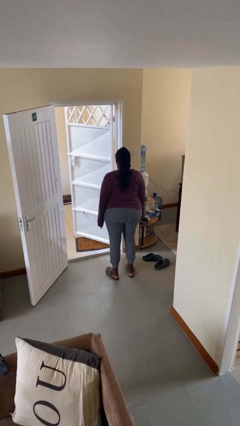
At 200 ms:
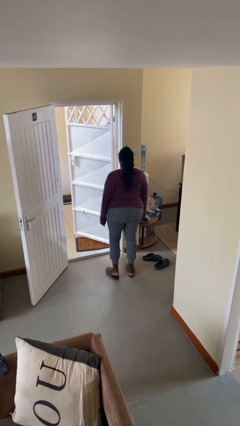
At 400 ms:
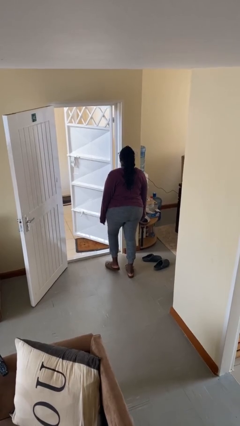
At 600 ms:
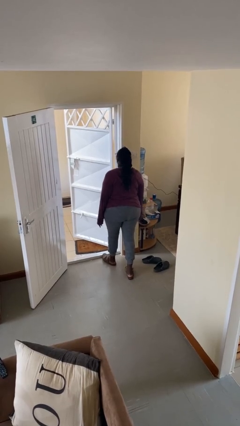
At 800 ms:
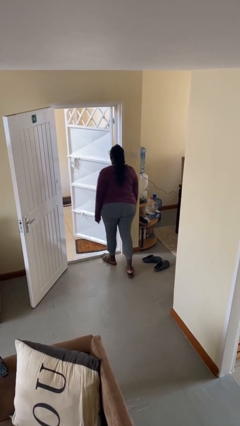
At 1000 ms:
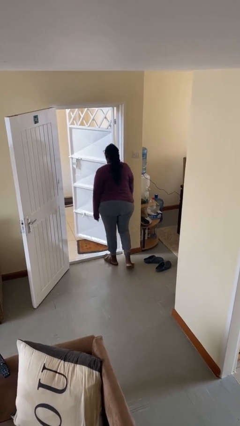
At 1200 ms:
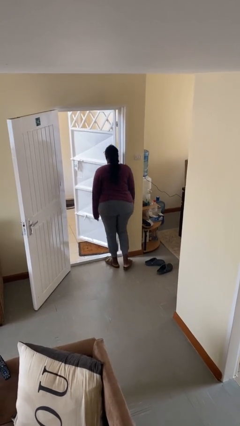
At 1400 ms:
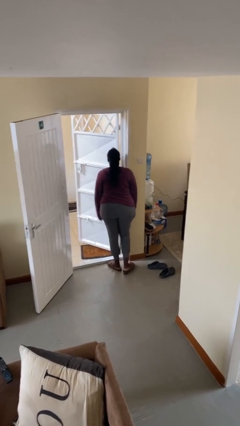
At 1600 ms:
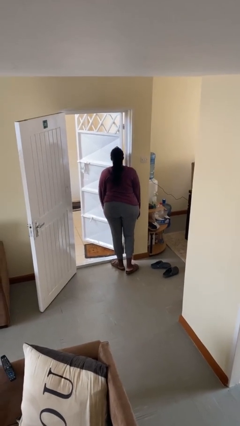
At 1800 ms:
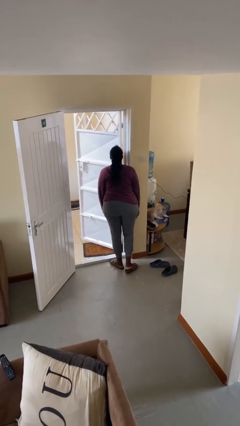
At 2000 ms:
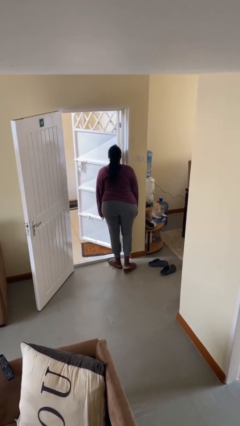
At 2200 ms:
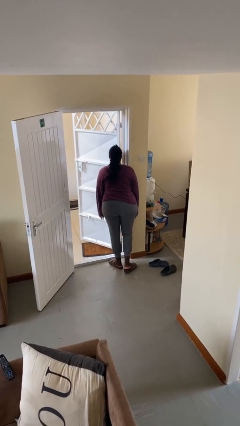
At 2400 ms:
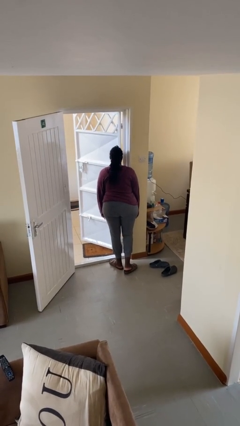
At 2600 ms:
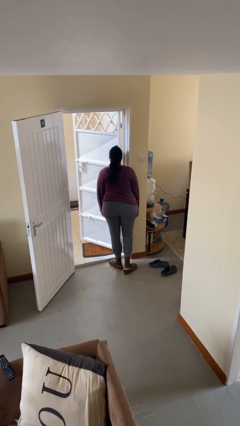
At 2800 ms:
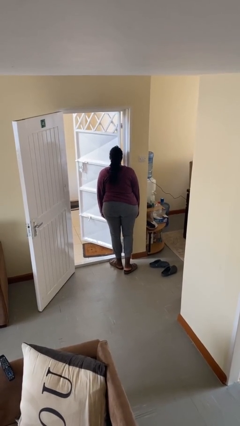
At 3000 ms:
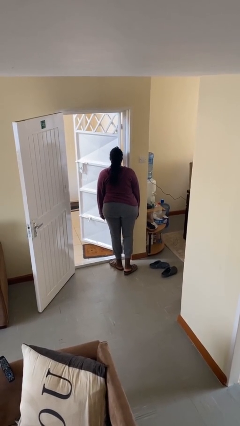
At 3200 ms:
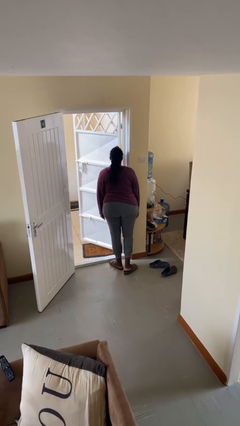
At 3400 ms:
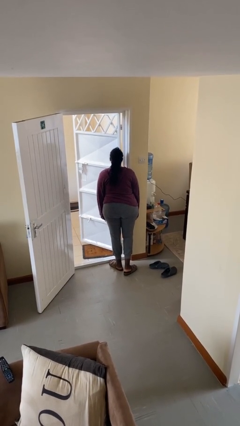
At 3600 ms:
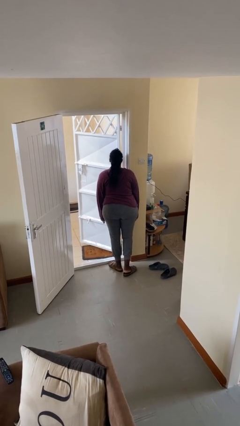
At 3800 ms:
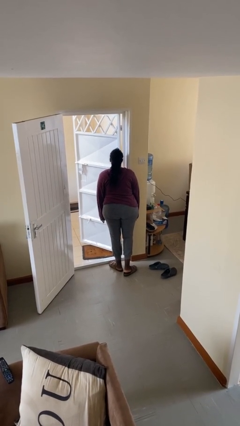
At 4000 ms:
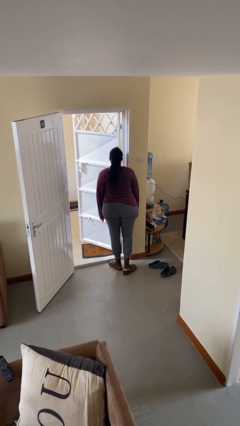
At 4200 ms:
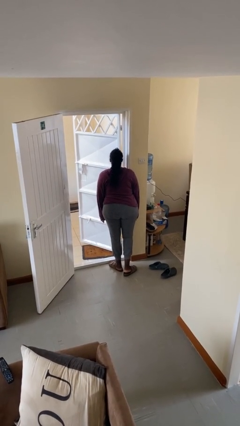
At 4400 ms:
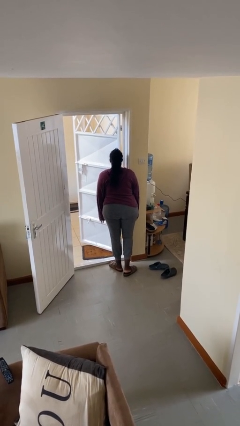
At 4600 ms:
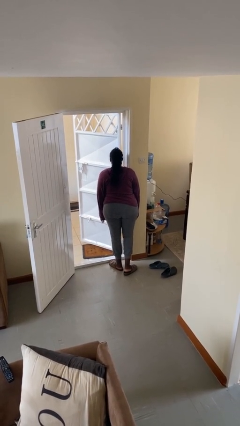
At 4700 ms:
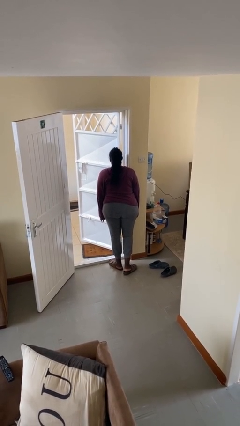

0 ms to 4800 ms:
person bumps into wall

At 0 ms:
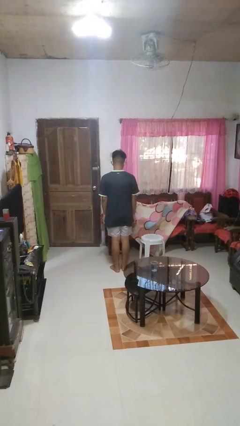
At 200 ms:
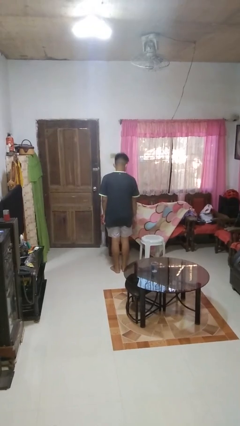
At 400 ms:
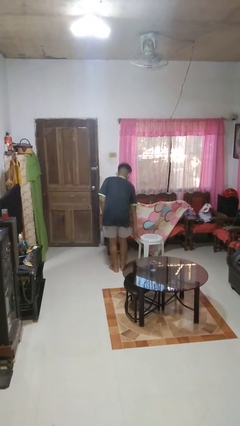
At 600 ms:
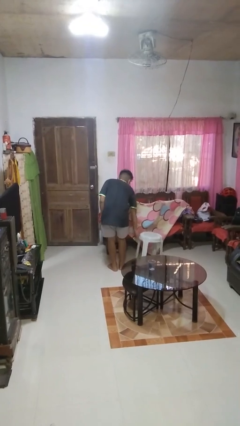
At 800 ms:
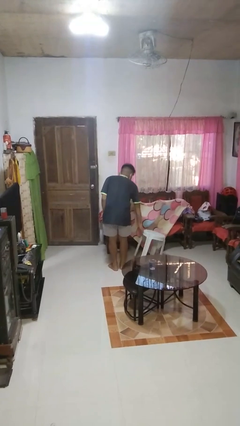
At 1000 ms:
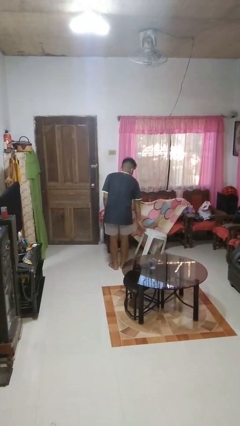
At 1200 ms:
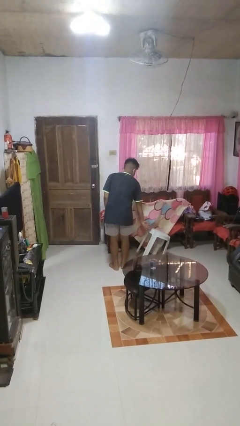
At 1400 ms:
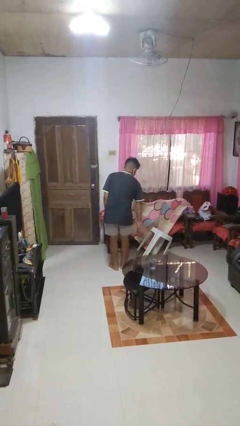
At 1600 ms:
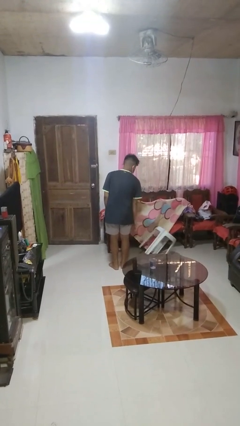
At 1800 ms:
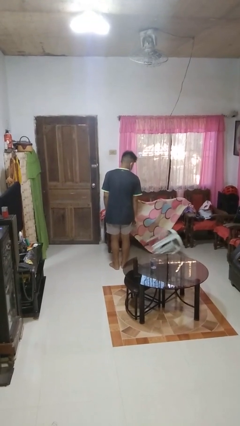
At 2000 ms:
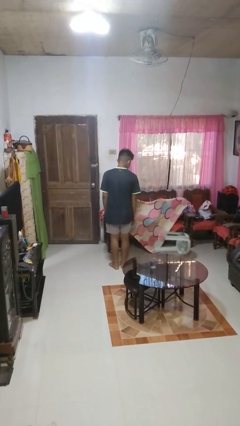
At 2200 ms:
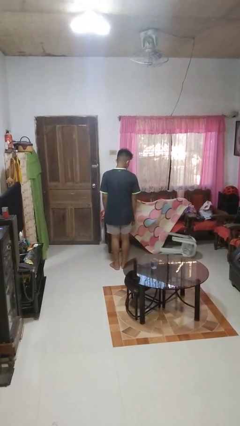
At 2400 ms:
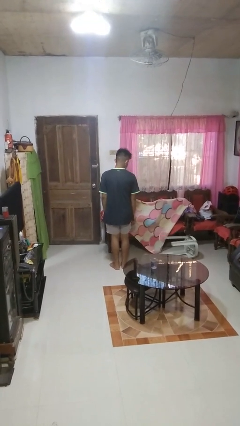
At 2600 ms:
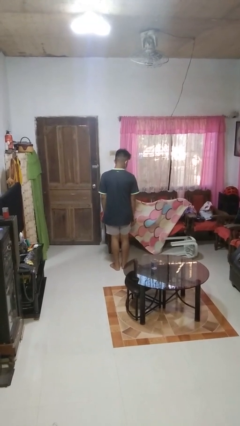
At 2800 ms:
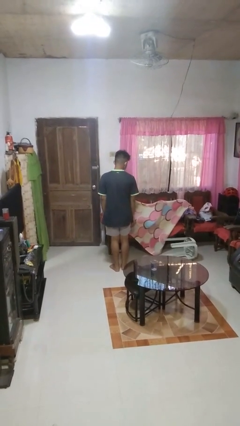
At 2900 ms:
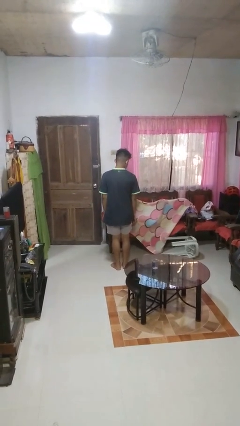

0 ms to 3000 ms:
person knocks over furniture

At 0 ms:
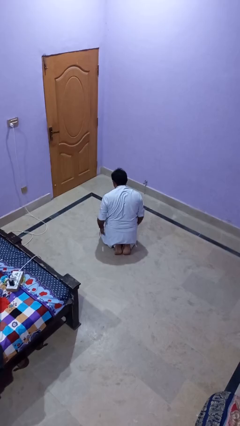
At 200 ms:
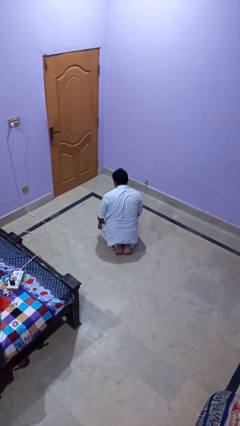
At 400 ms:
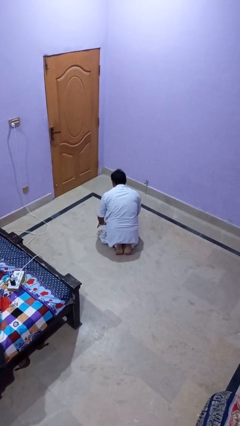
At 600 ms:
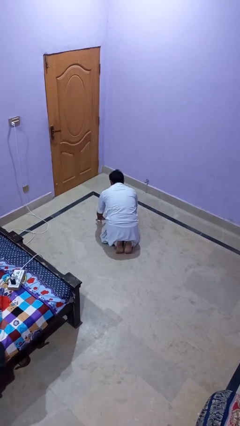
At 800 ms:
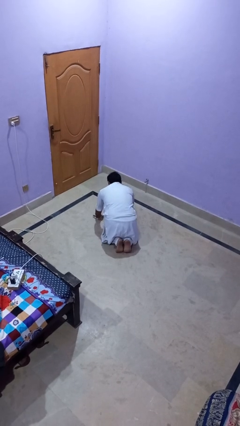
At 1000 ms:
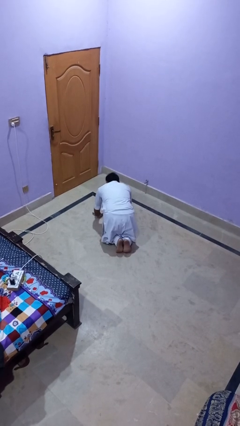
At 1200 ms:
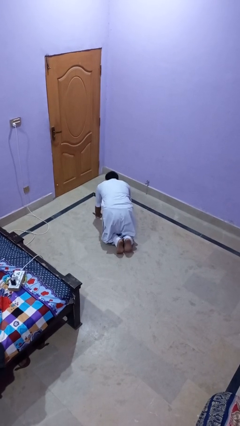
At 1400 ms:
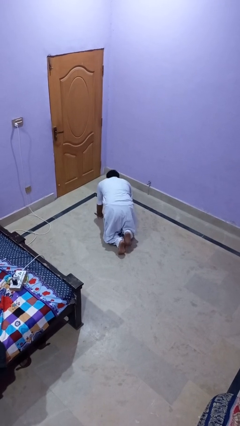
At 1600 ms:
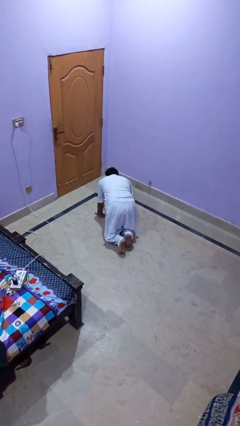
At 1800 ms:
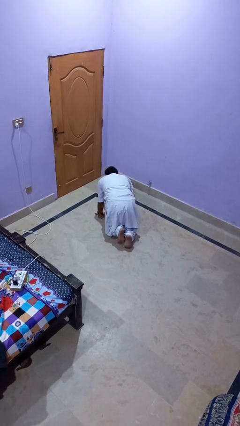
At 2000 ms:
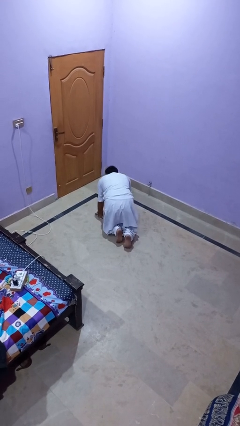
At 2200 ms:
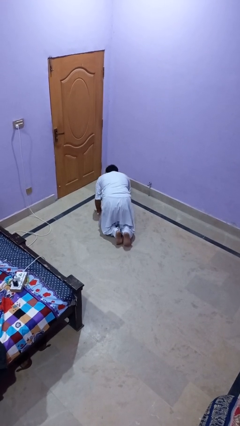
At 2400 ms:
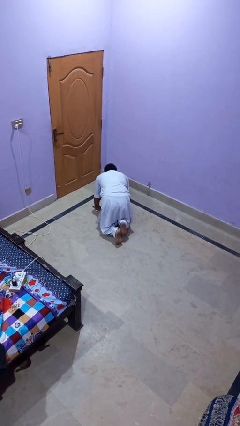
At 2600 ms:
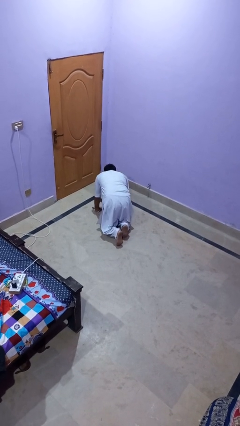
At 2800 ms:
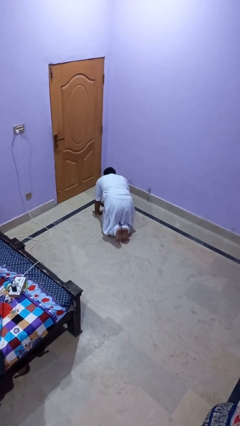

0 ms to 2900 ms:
person crawls

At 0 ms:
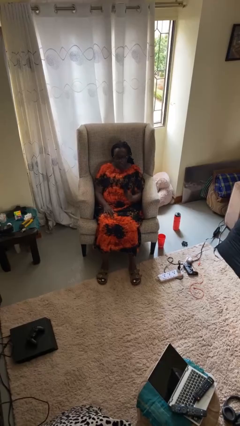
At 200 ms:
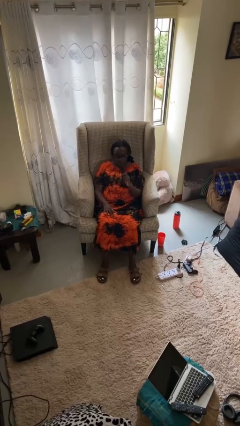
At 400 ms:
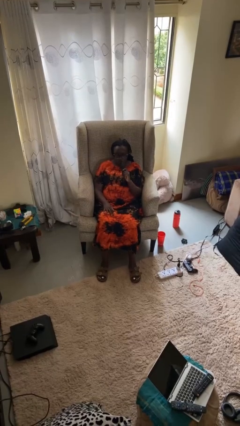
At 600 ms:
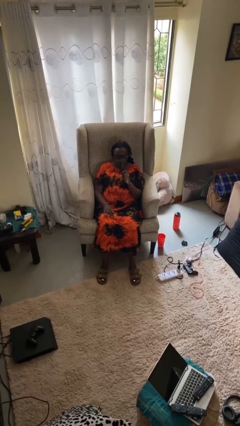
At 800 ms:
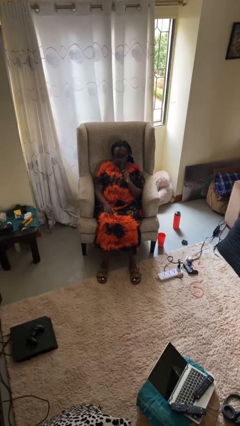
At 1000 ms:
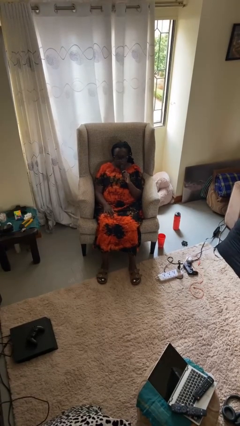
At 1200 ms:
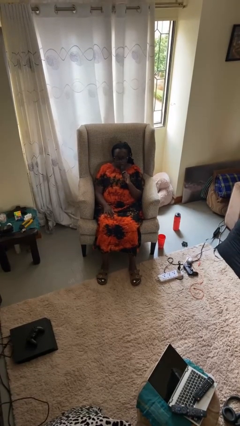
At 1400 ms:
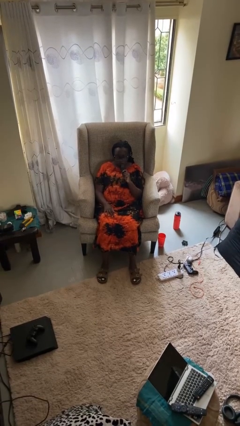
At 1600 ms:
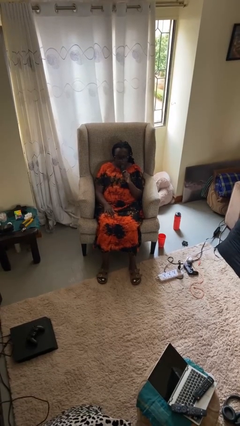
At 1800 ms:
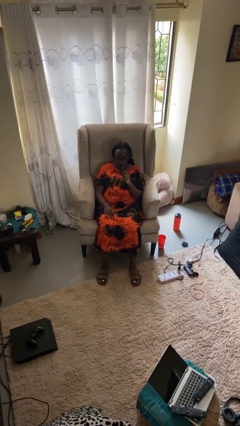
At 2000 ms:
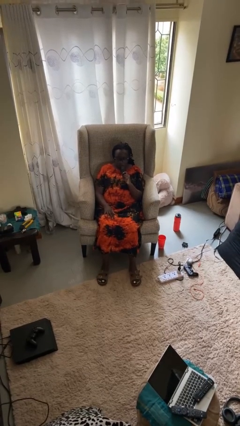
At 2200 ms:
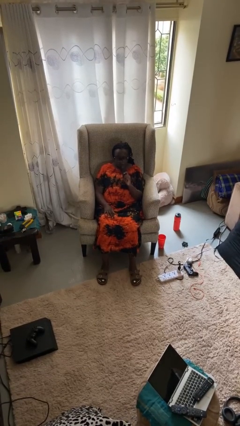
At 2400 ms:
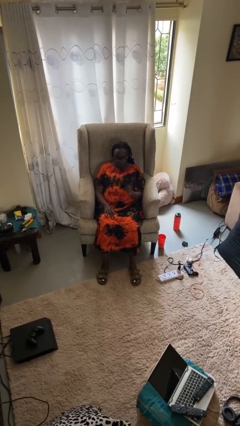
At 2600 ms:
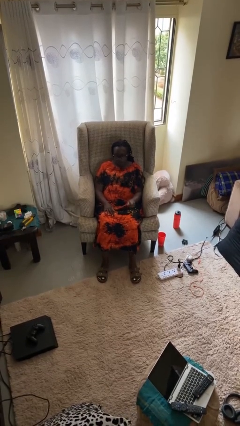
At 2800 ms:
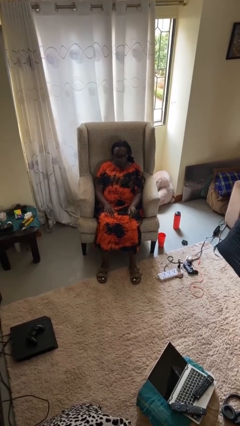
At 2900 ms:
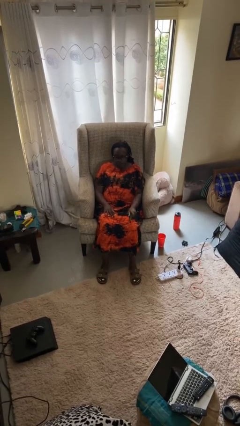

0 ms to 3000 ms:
person vapes

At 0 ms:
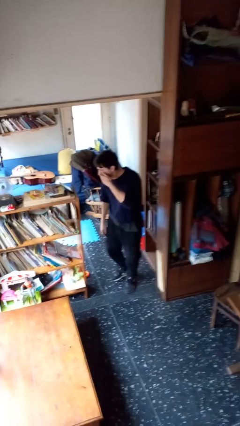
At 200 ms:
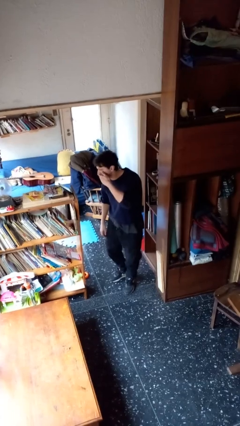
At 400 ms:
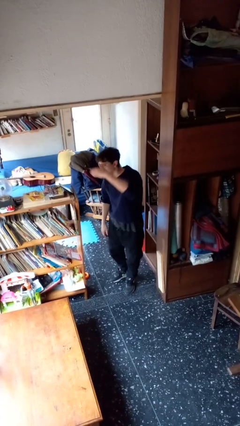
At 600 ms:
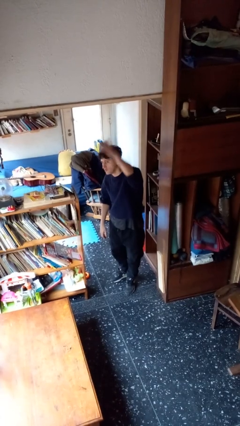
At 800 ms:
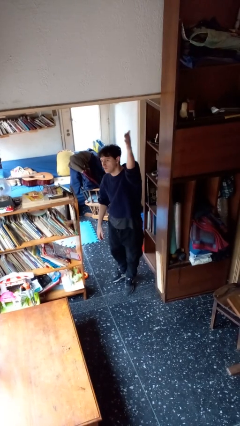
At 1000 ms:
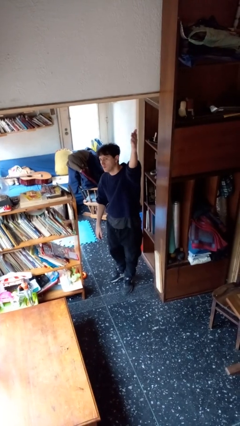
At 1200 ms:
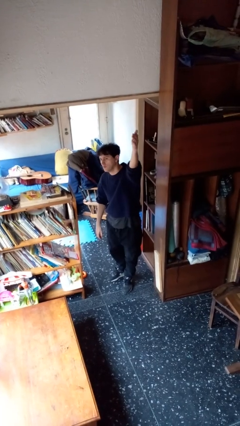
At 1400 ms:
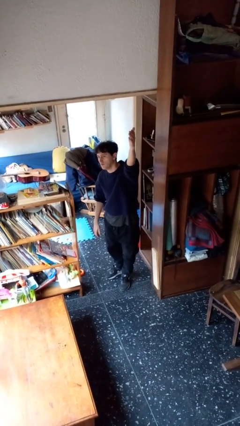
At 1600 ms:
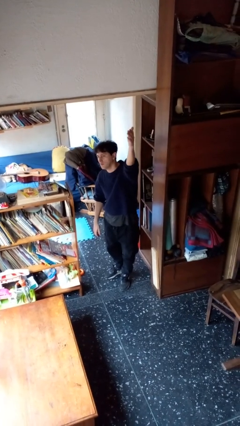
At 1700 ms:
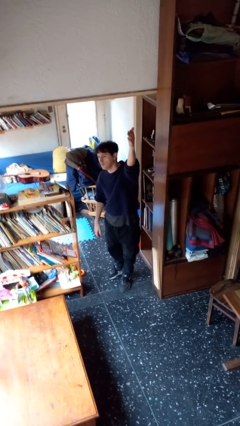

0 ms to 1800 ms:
person gestures blow kiss

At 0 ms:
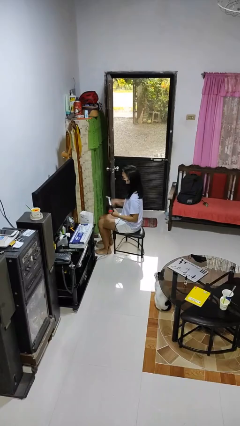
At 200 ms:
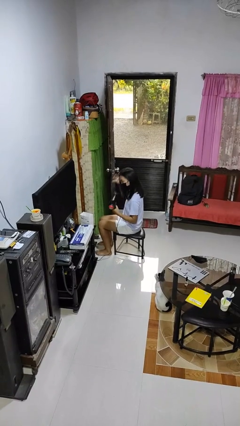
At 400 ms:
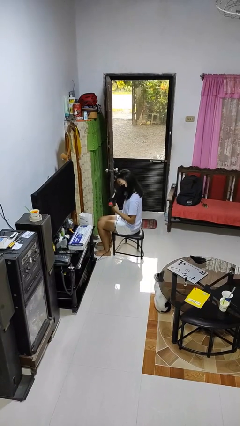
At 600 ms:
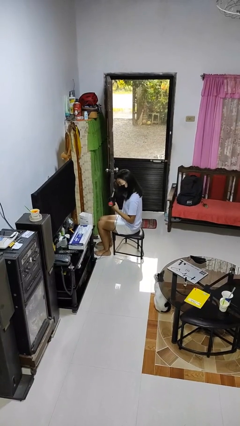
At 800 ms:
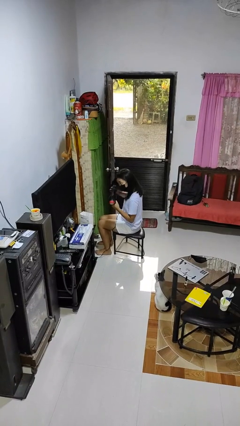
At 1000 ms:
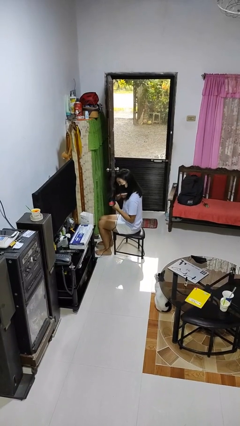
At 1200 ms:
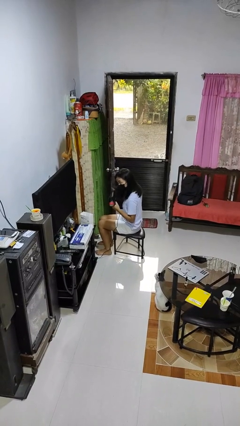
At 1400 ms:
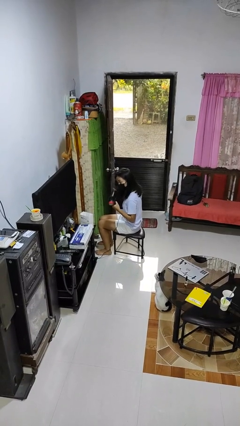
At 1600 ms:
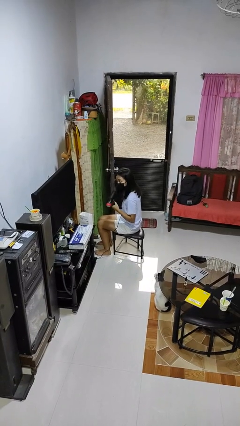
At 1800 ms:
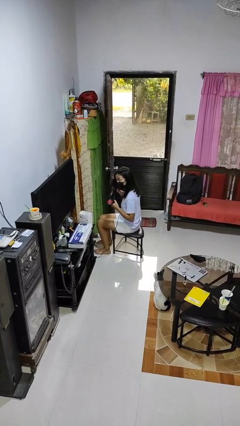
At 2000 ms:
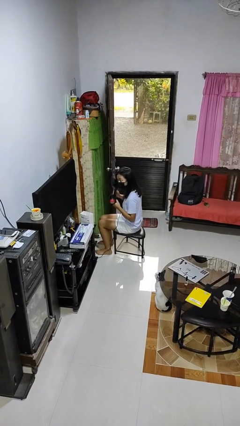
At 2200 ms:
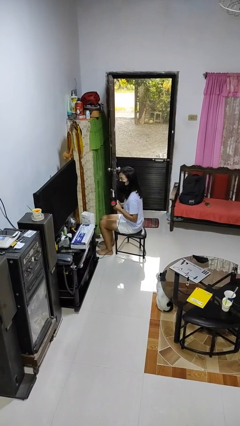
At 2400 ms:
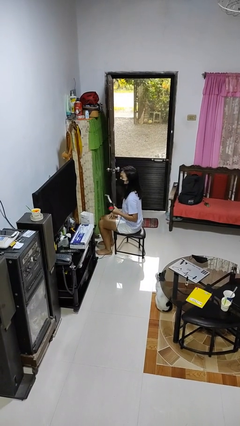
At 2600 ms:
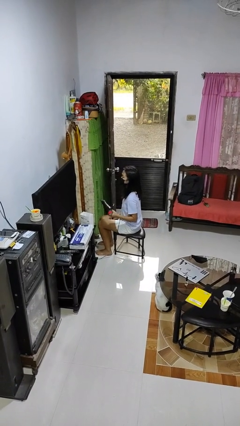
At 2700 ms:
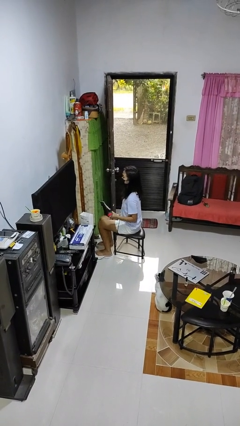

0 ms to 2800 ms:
person dries hair with hairdryer
